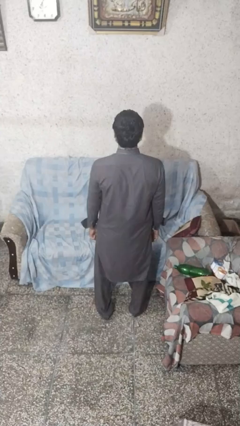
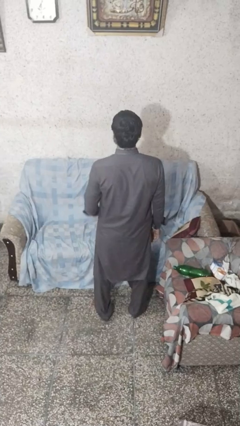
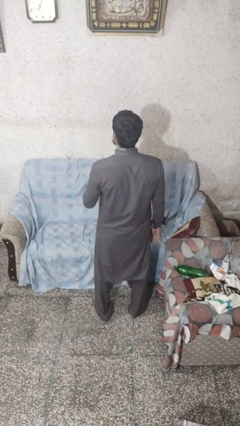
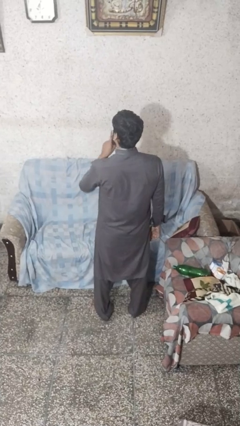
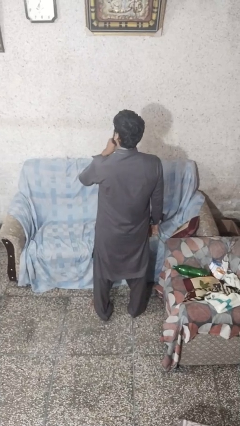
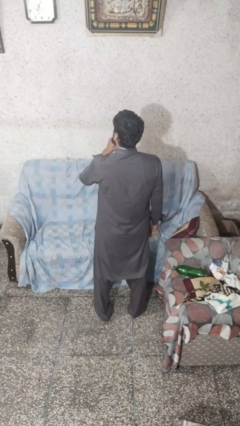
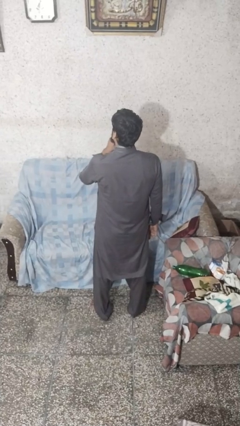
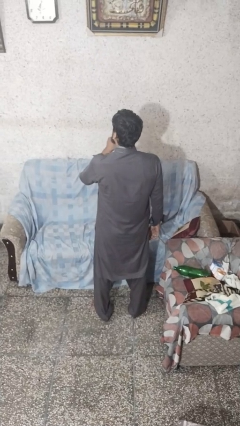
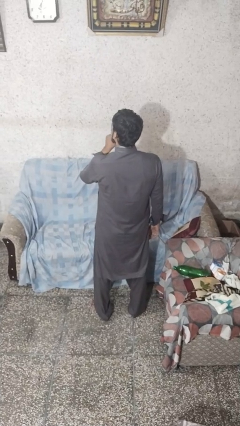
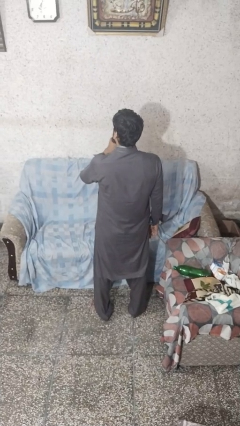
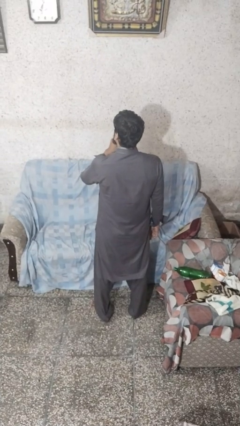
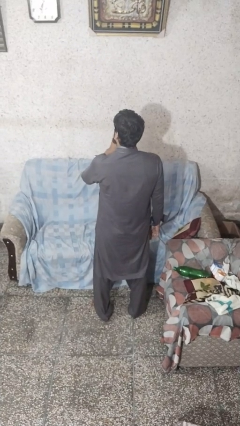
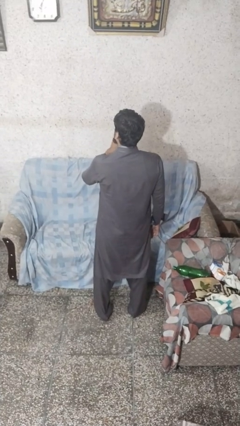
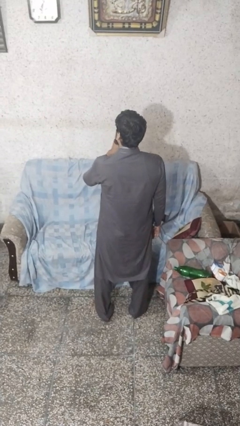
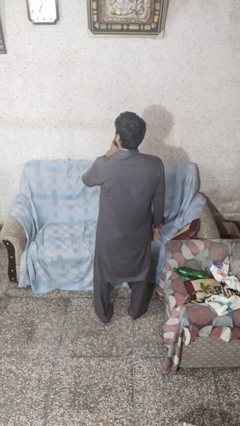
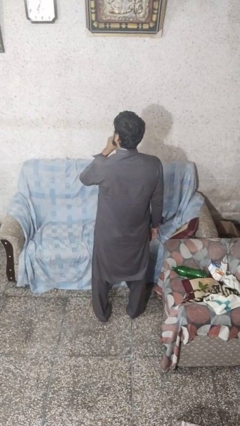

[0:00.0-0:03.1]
person gestures be quiet

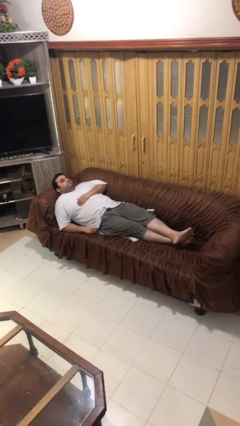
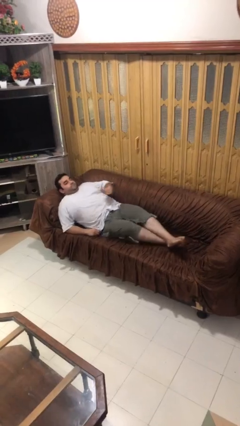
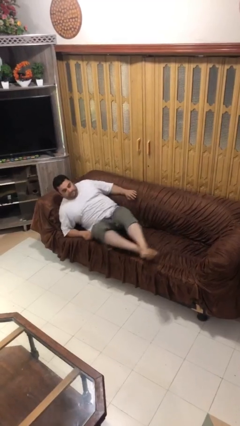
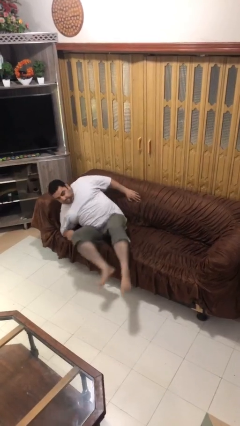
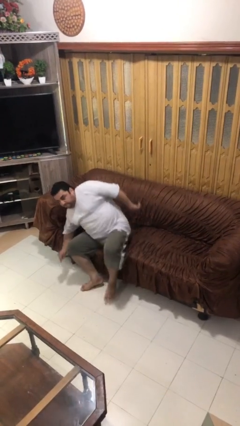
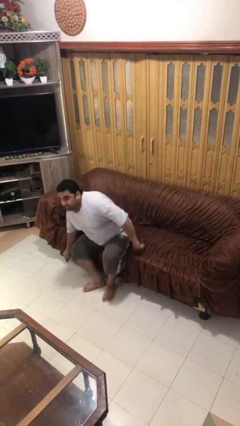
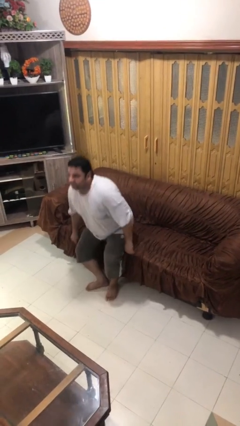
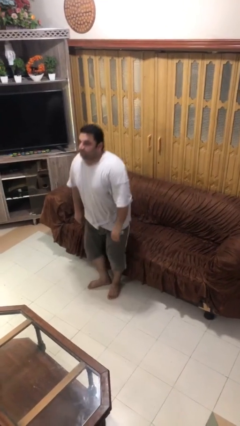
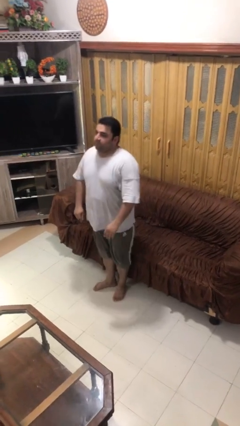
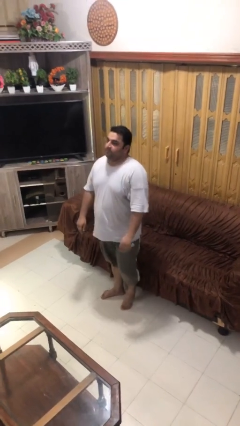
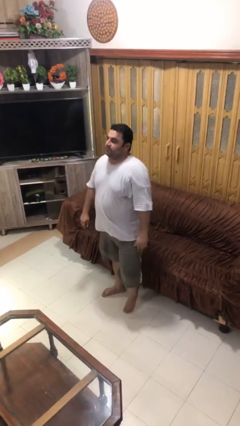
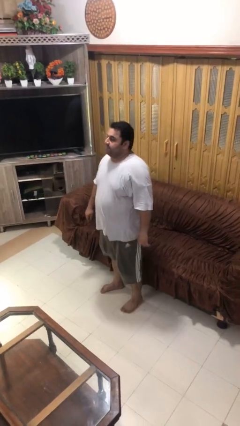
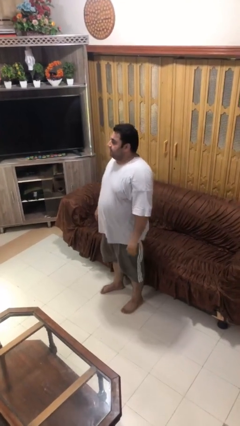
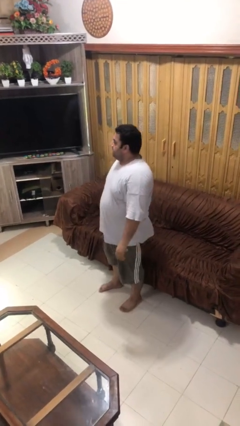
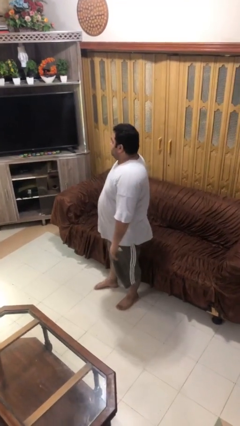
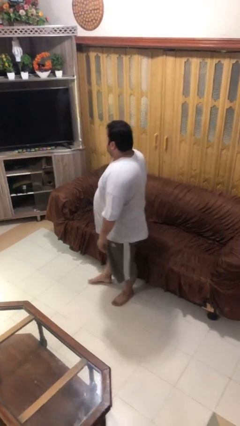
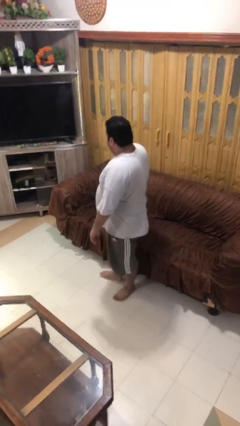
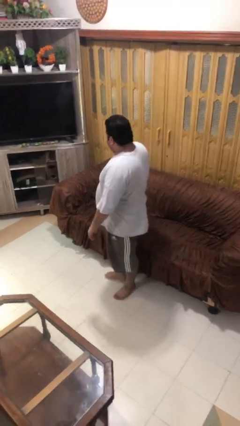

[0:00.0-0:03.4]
person stands up

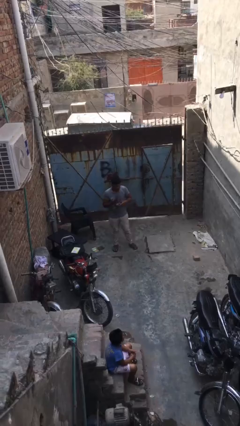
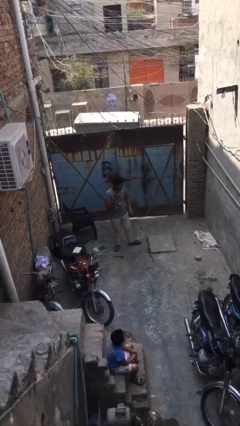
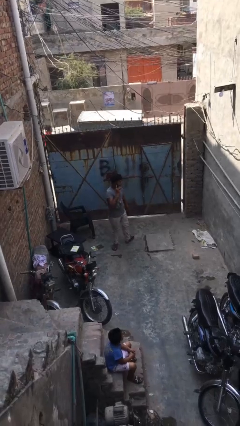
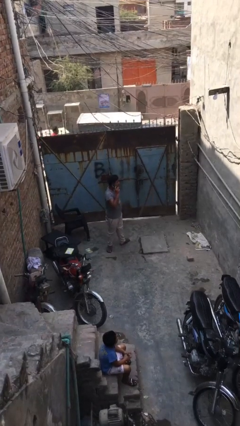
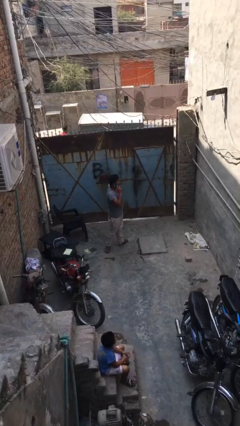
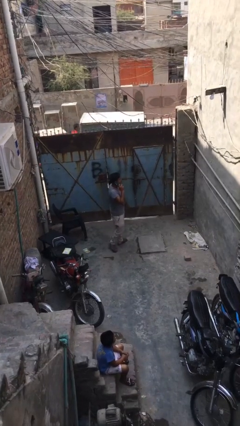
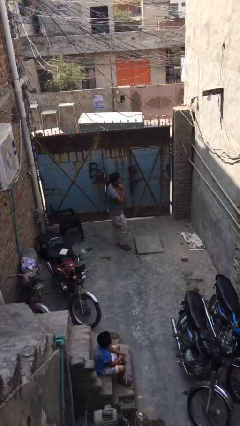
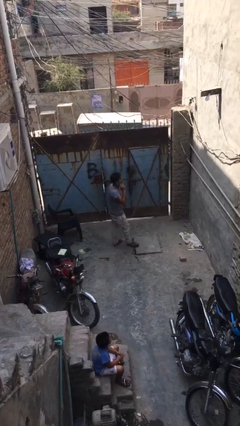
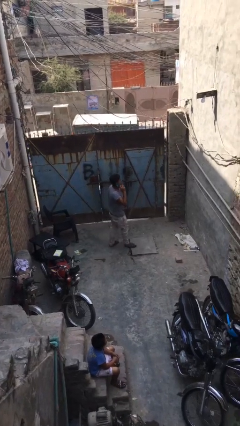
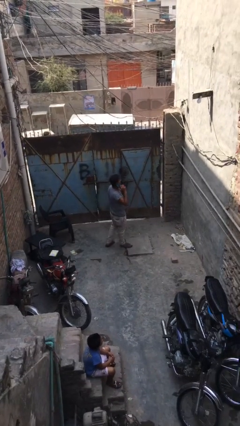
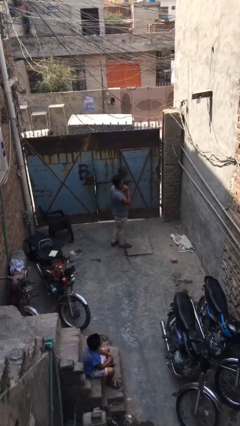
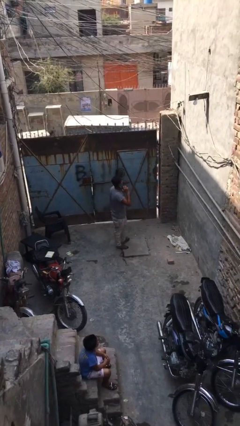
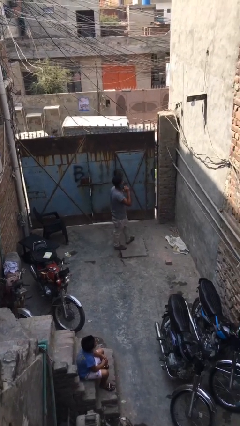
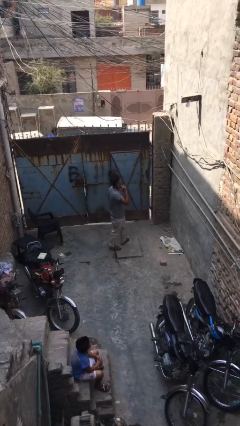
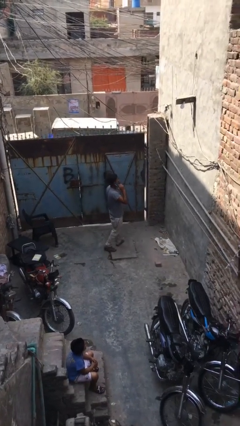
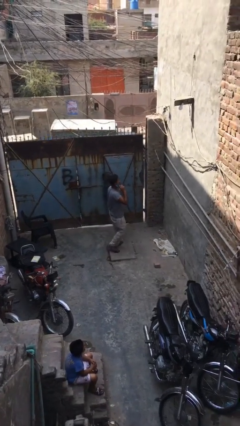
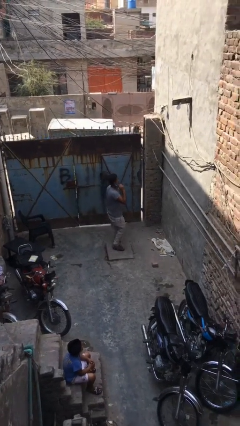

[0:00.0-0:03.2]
person talks on phone

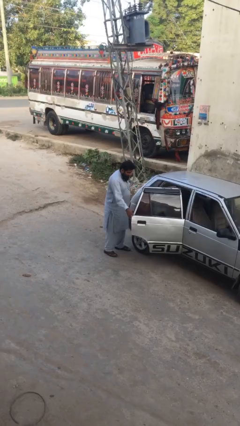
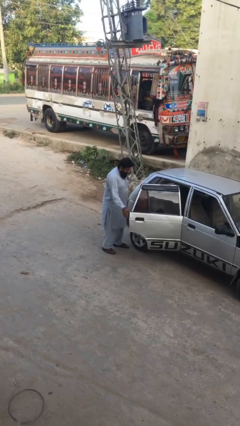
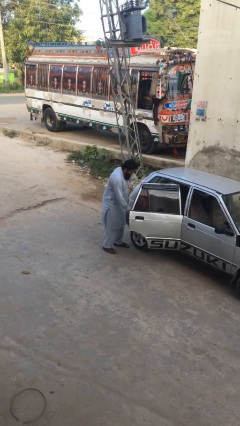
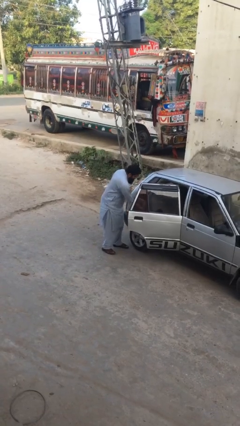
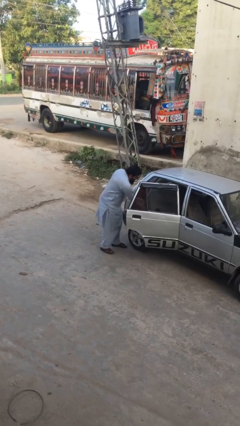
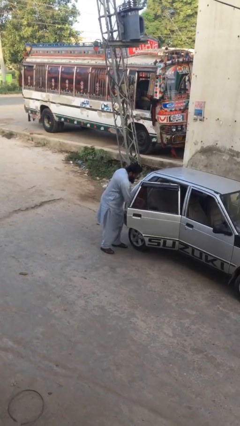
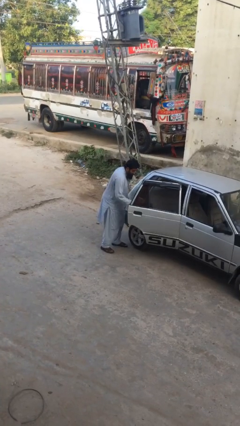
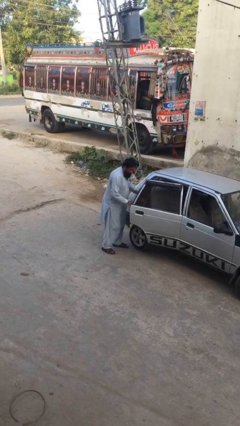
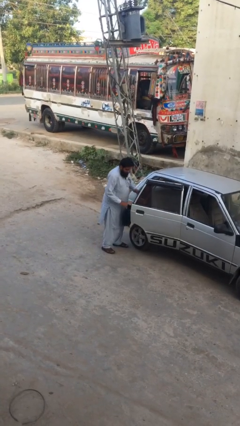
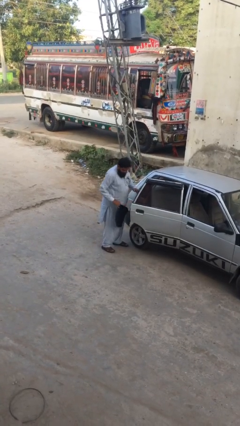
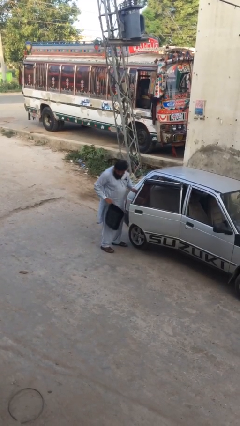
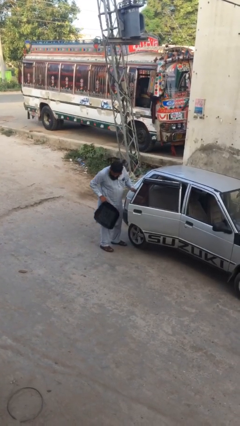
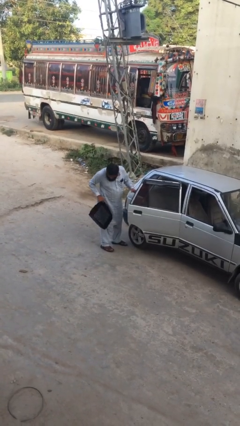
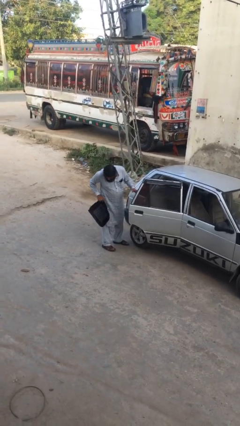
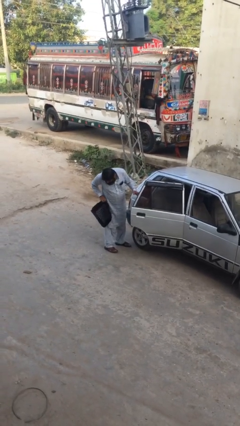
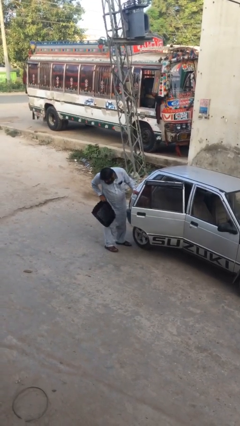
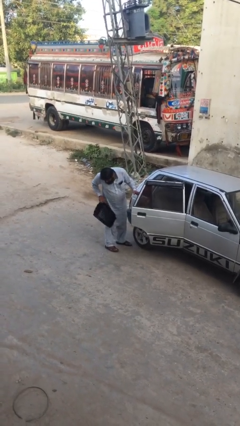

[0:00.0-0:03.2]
person unloads car

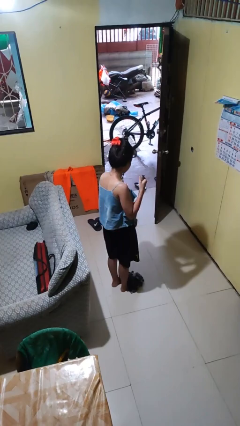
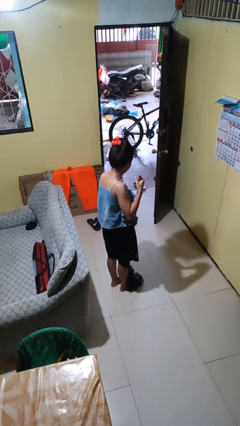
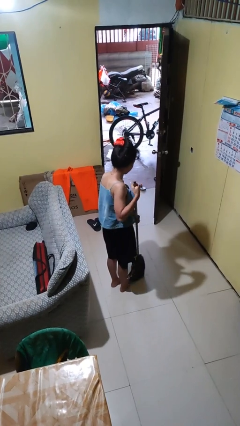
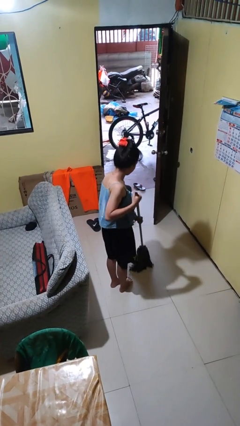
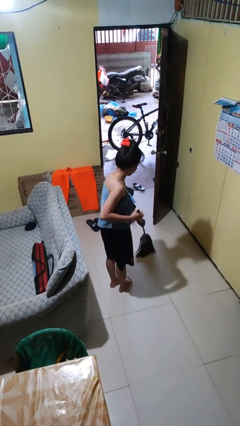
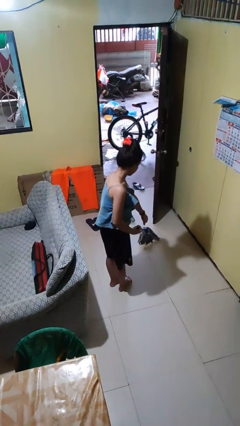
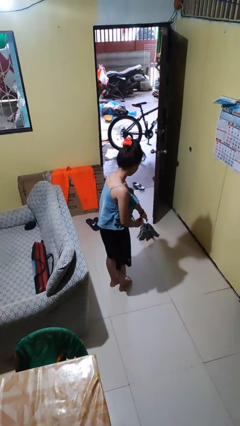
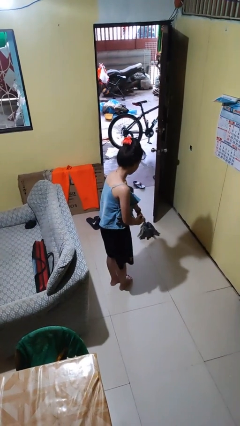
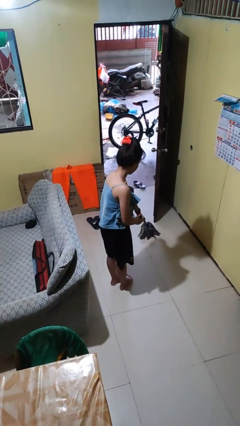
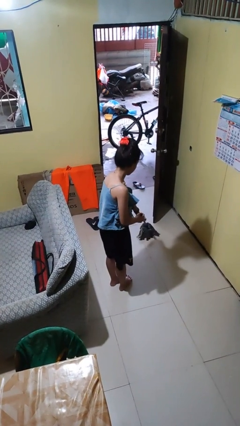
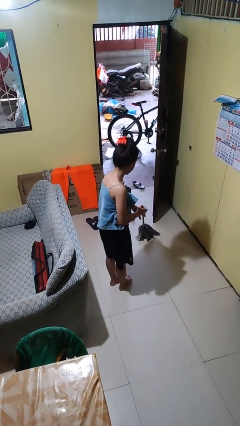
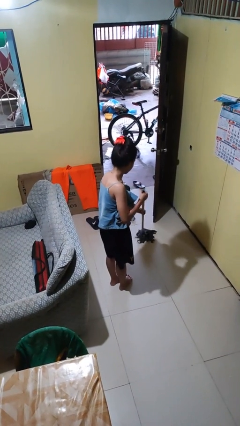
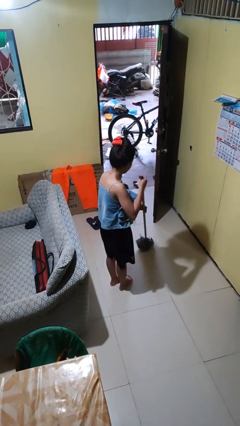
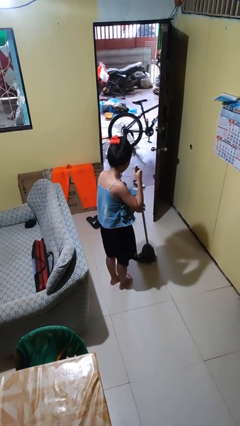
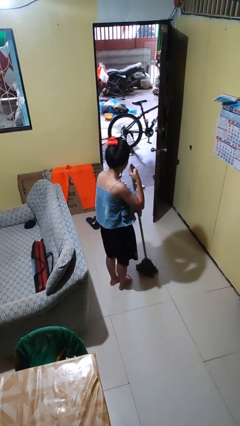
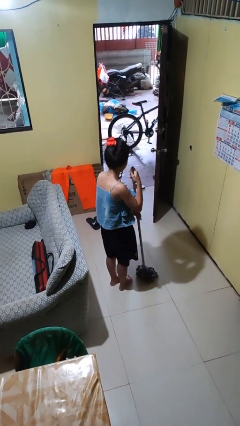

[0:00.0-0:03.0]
person mops

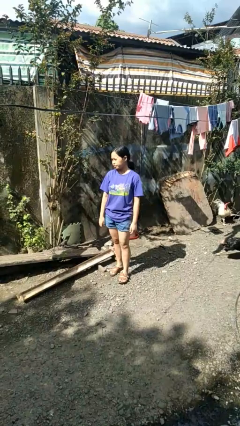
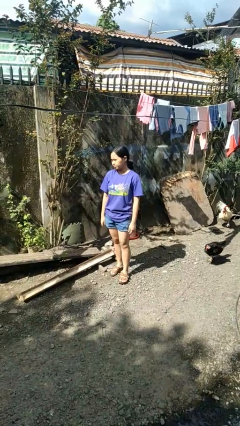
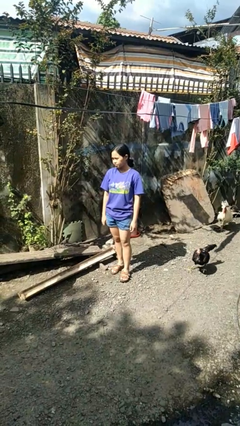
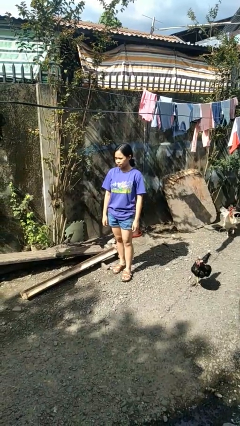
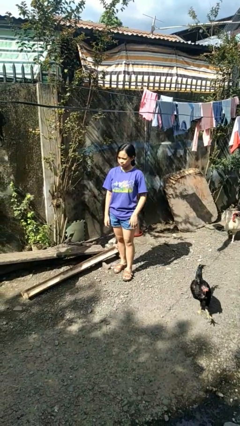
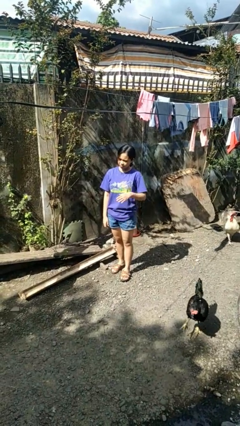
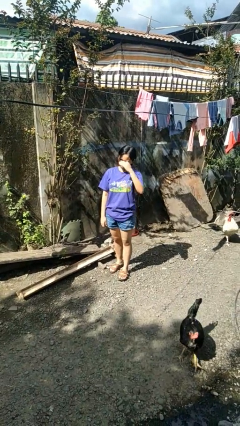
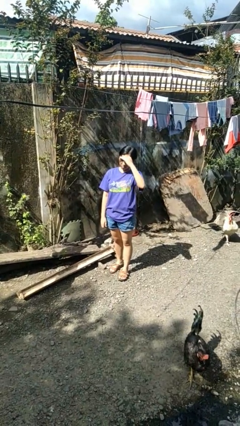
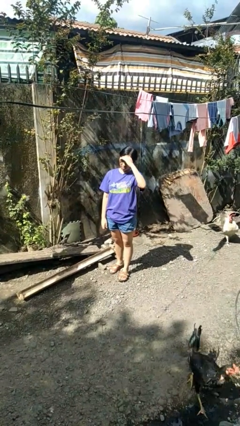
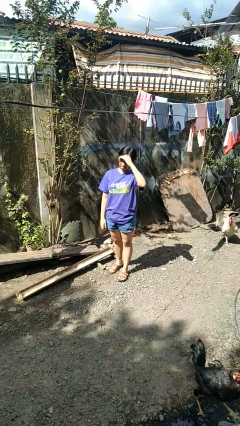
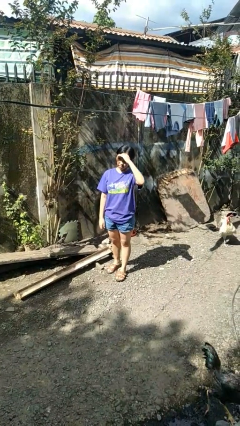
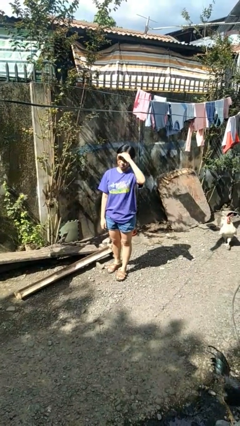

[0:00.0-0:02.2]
person shades eyes
